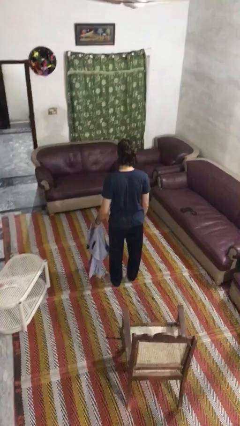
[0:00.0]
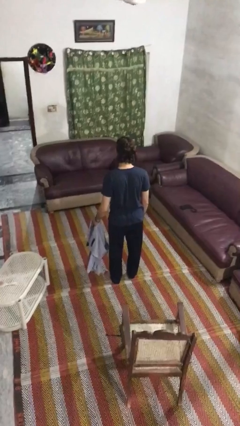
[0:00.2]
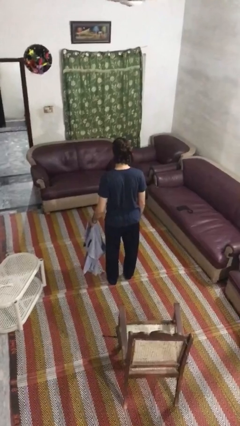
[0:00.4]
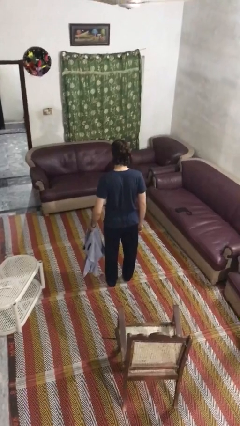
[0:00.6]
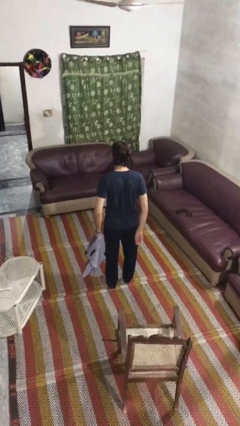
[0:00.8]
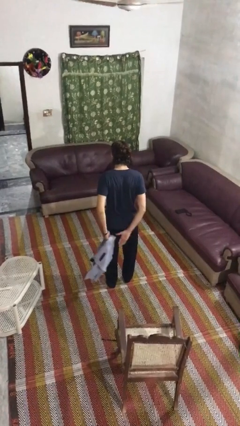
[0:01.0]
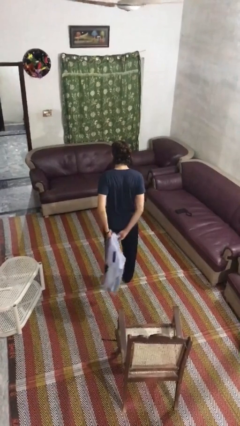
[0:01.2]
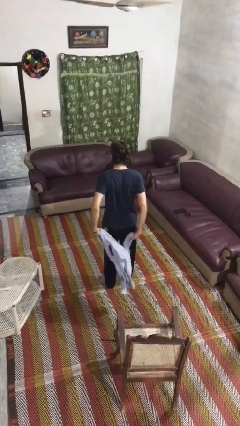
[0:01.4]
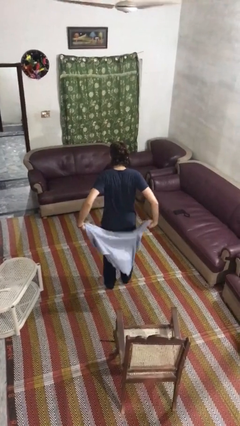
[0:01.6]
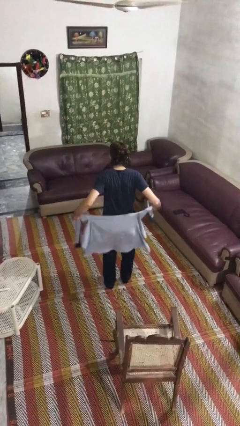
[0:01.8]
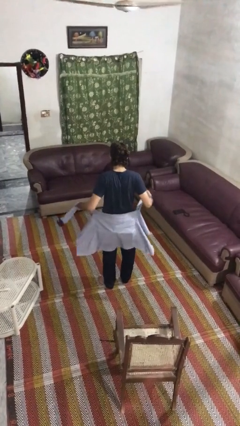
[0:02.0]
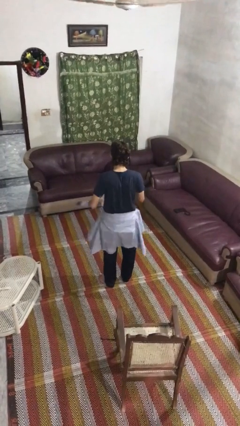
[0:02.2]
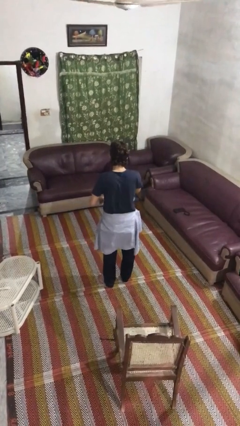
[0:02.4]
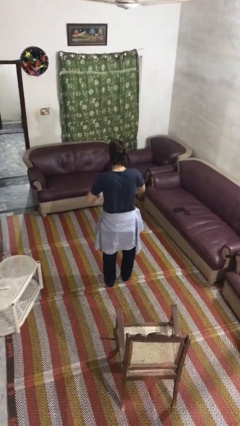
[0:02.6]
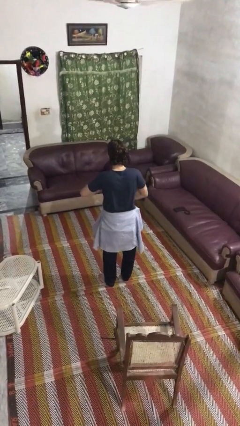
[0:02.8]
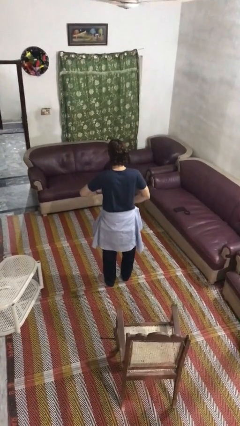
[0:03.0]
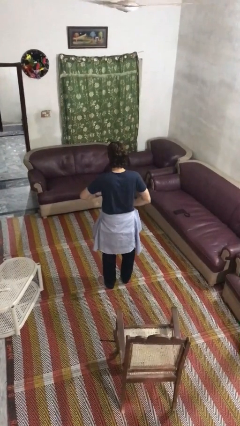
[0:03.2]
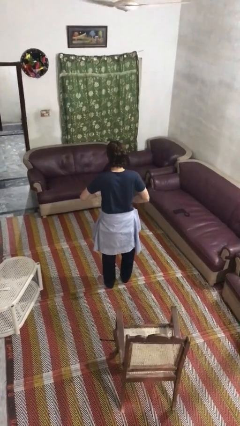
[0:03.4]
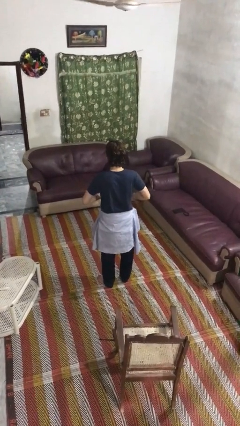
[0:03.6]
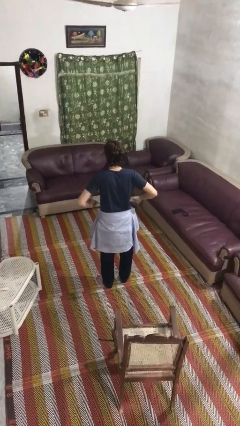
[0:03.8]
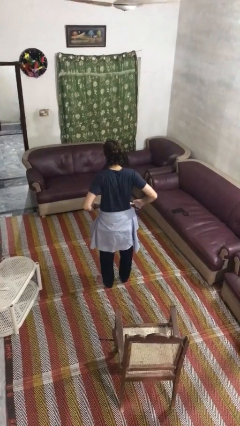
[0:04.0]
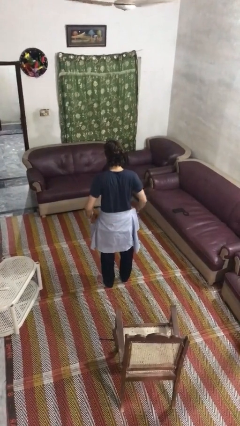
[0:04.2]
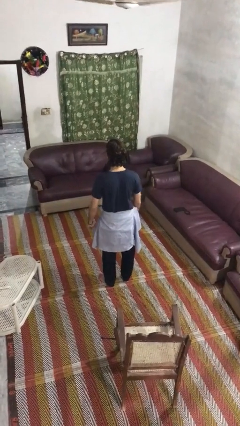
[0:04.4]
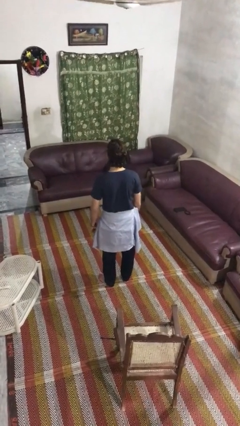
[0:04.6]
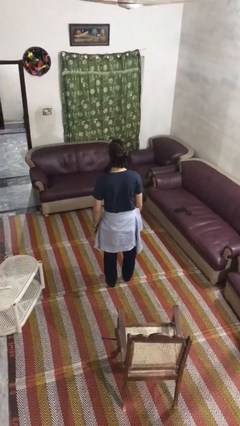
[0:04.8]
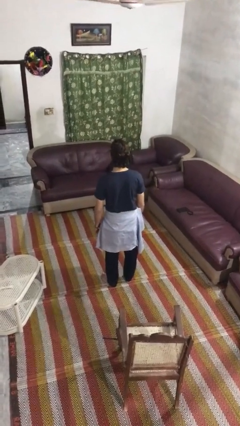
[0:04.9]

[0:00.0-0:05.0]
person ties jacket around waist

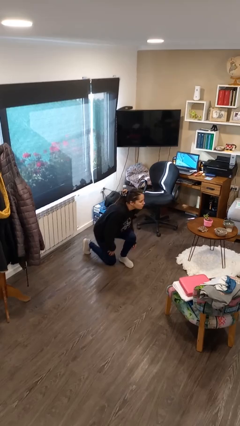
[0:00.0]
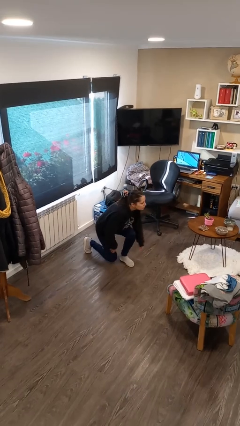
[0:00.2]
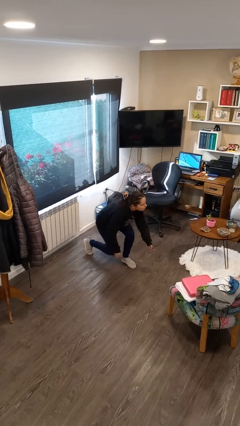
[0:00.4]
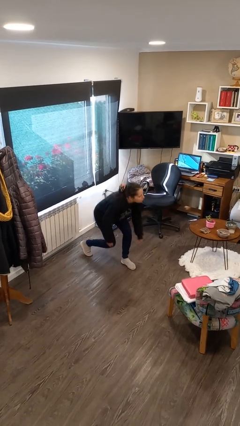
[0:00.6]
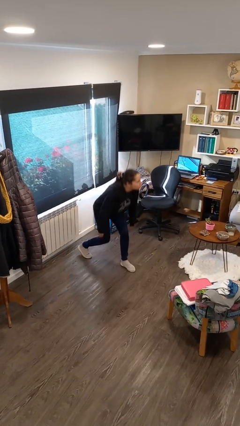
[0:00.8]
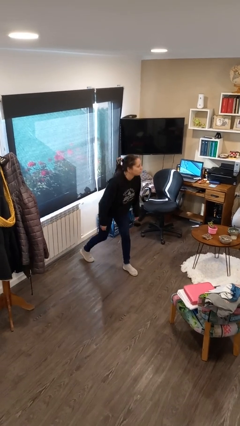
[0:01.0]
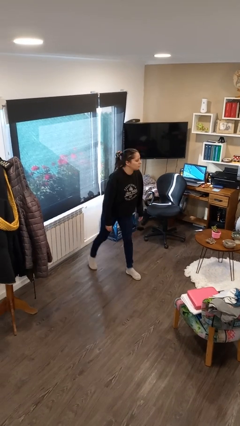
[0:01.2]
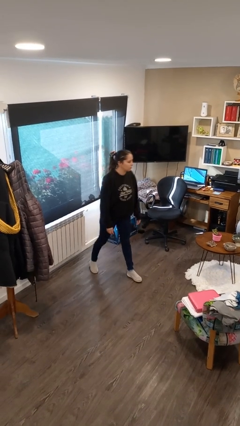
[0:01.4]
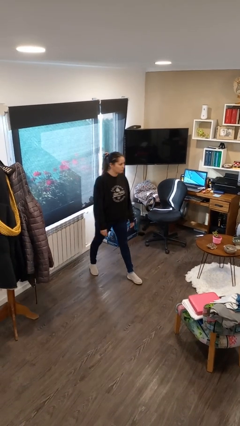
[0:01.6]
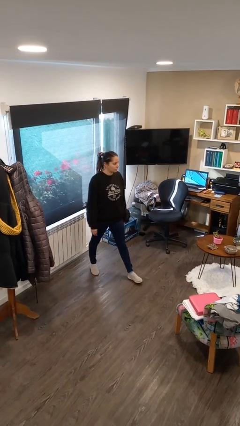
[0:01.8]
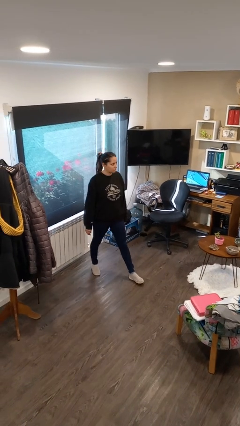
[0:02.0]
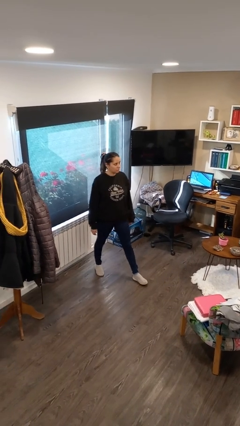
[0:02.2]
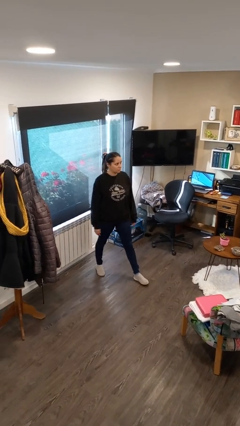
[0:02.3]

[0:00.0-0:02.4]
person stands up from floor

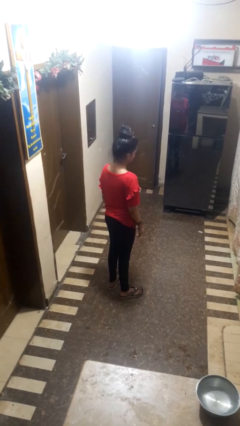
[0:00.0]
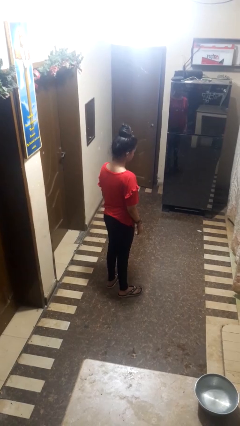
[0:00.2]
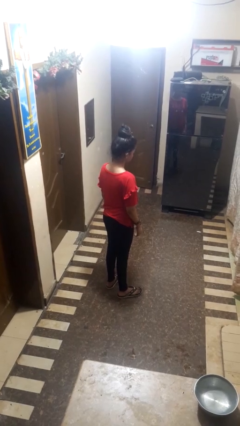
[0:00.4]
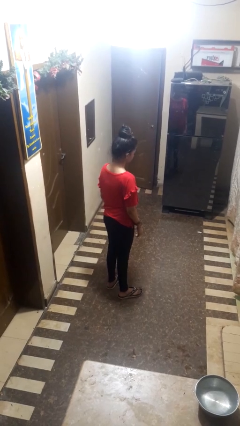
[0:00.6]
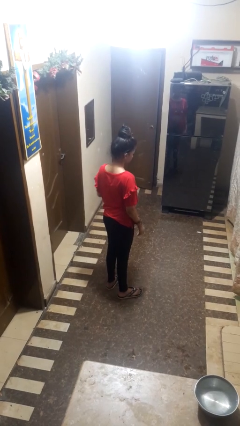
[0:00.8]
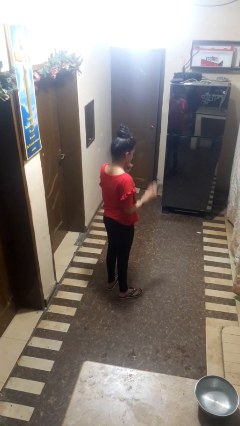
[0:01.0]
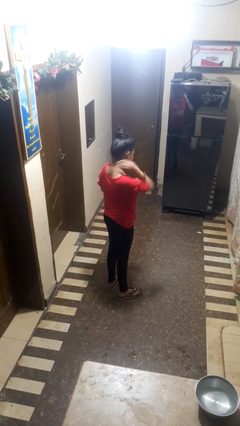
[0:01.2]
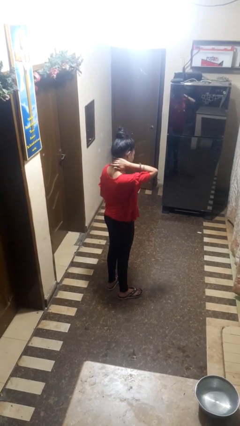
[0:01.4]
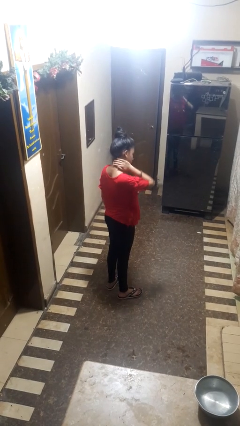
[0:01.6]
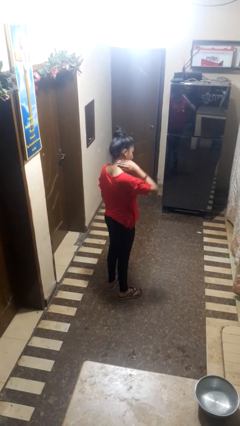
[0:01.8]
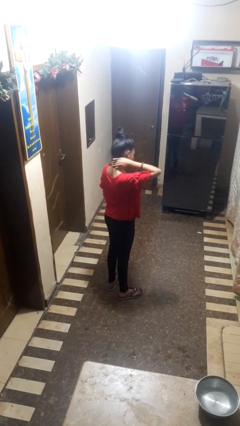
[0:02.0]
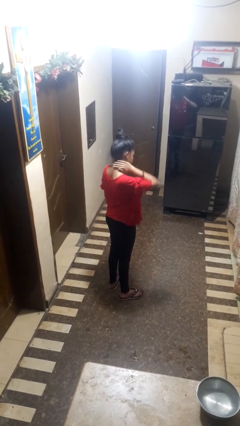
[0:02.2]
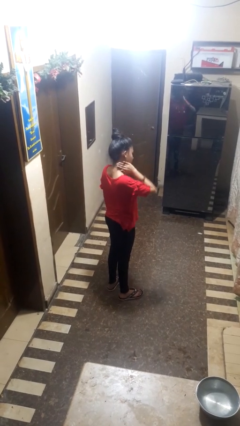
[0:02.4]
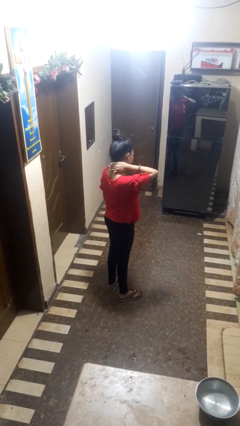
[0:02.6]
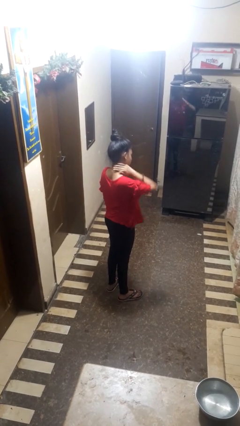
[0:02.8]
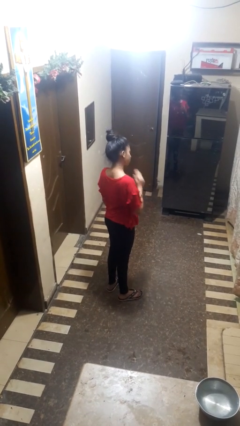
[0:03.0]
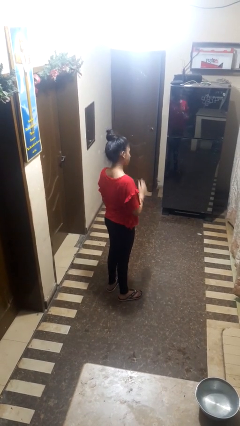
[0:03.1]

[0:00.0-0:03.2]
person rubs neck

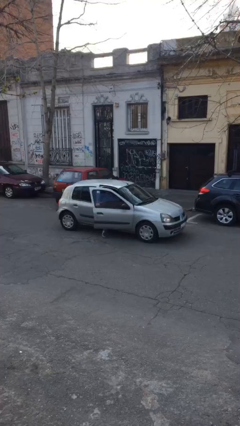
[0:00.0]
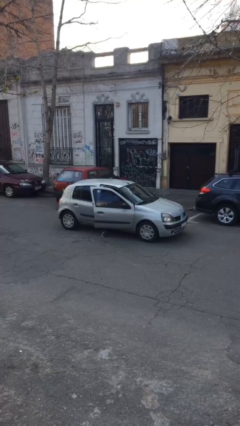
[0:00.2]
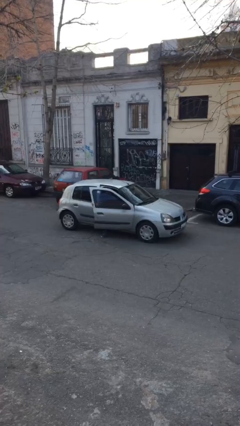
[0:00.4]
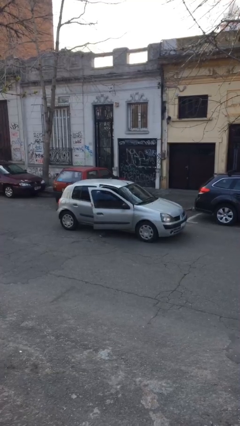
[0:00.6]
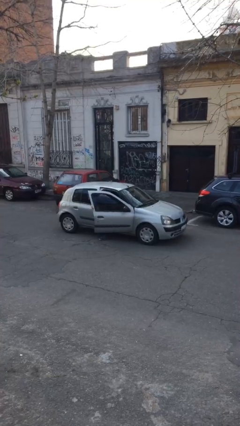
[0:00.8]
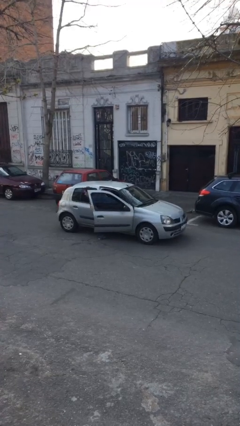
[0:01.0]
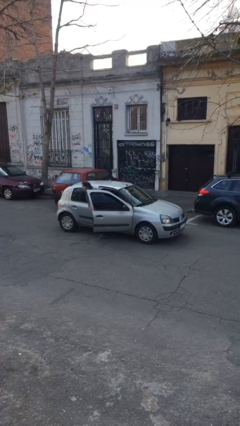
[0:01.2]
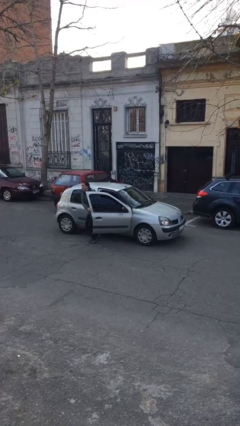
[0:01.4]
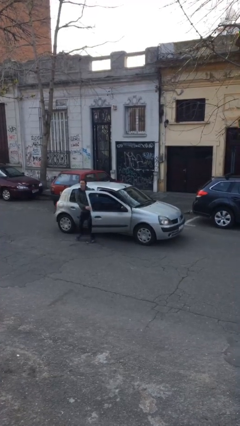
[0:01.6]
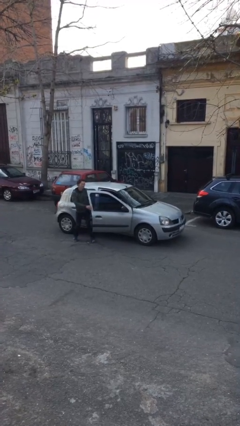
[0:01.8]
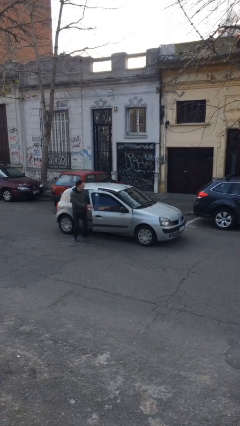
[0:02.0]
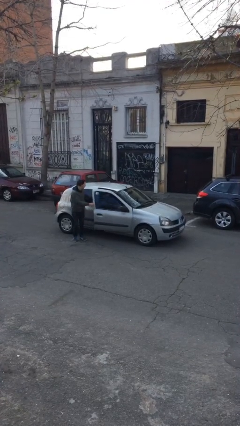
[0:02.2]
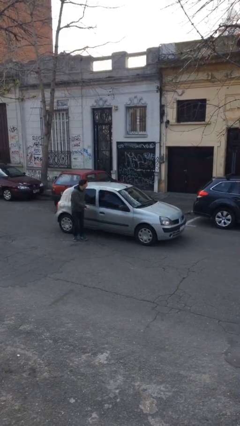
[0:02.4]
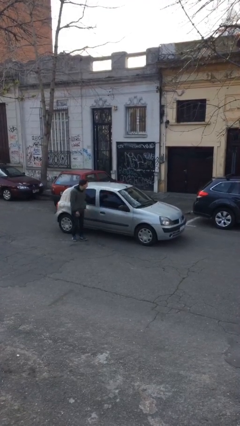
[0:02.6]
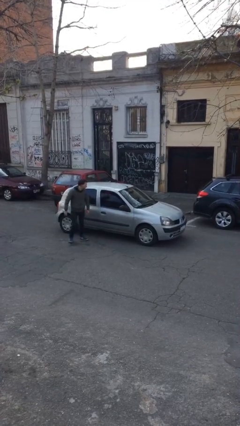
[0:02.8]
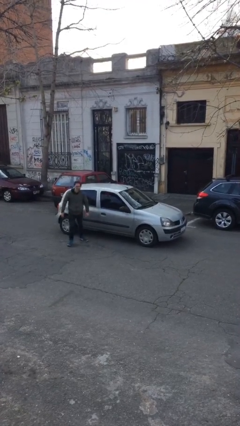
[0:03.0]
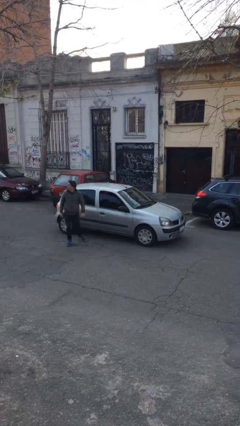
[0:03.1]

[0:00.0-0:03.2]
car drops off person

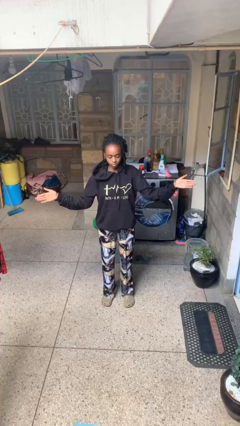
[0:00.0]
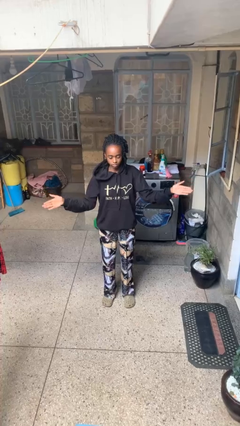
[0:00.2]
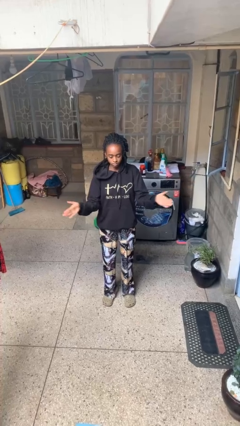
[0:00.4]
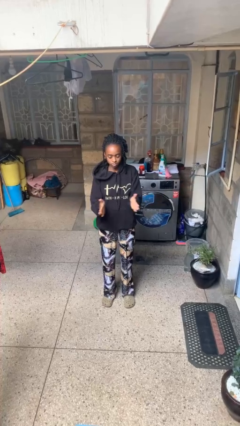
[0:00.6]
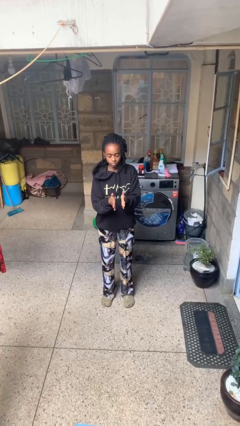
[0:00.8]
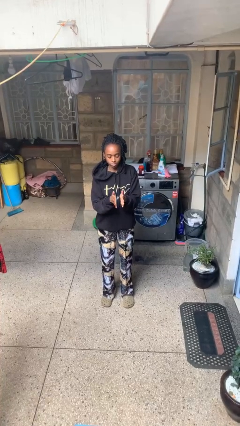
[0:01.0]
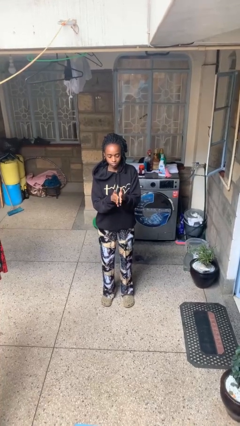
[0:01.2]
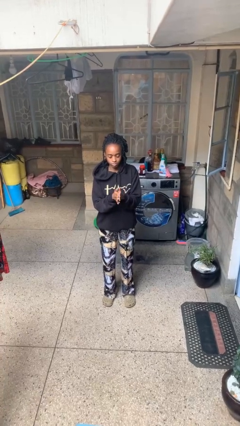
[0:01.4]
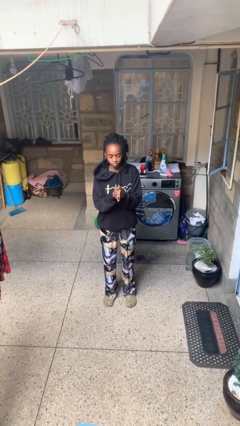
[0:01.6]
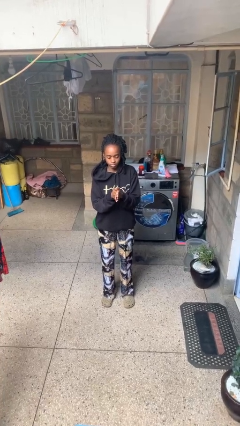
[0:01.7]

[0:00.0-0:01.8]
person gestures zoom out

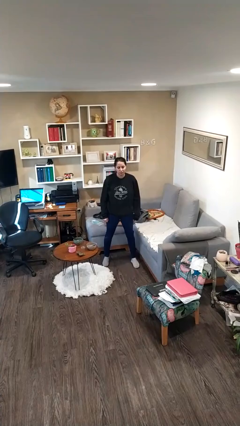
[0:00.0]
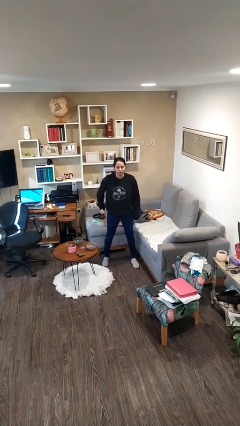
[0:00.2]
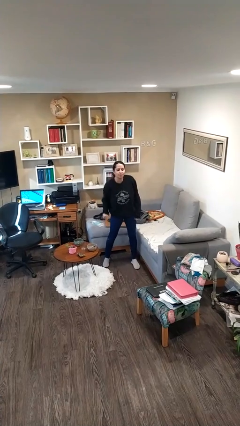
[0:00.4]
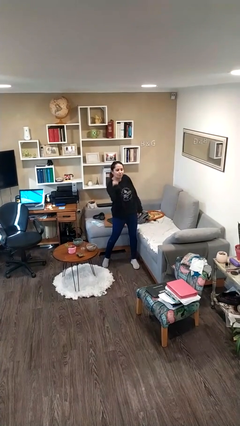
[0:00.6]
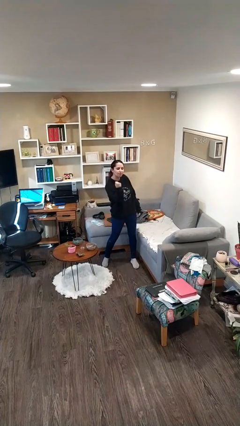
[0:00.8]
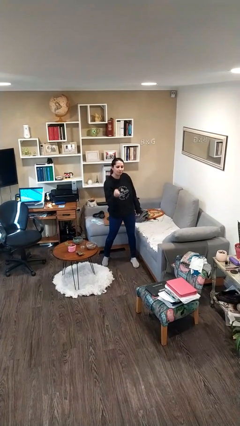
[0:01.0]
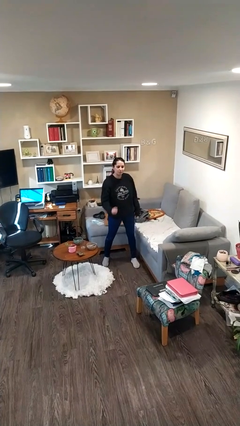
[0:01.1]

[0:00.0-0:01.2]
person punches

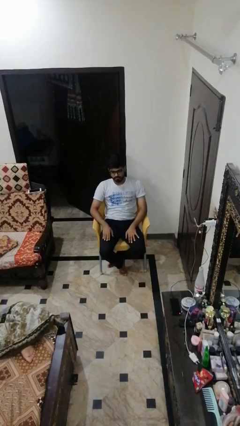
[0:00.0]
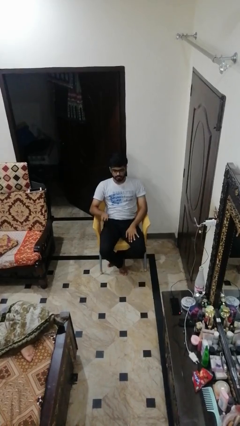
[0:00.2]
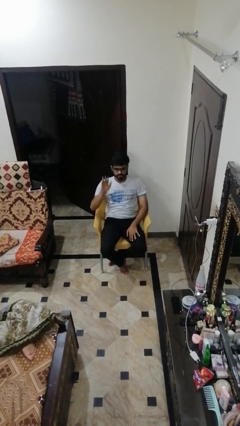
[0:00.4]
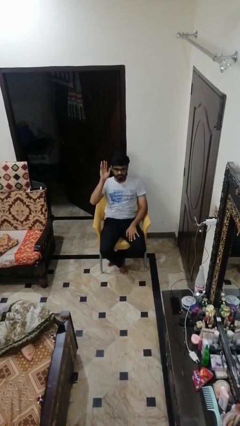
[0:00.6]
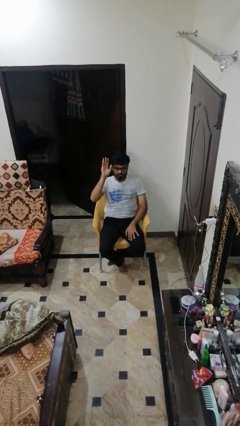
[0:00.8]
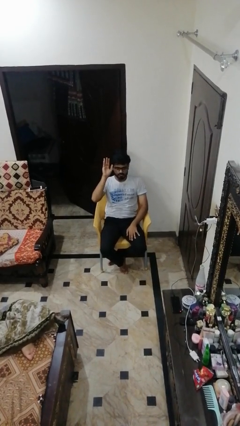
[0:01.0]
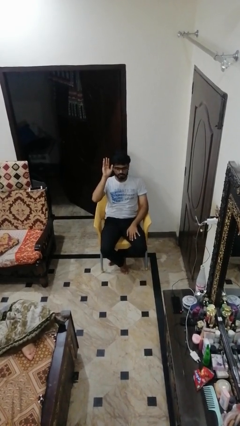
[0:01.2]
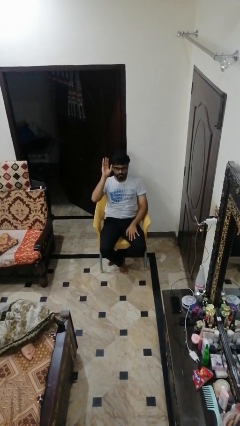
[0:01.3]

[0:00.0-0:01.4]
person gestures raise hand
